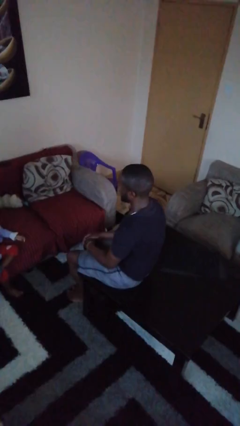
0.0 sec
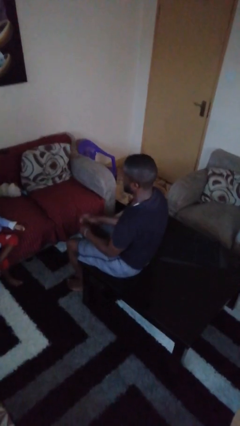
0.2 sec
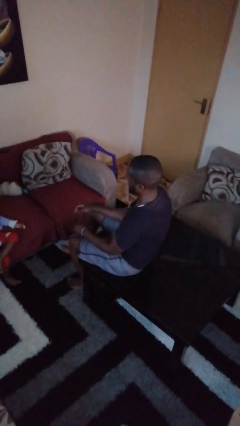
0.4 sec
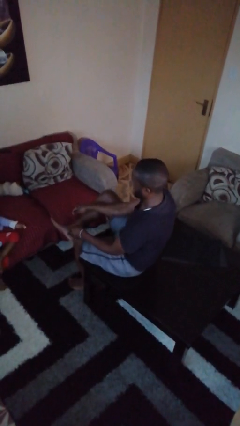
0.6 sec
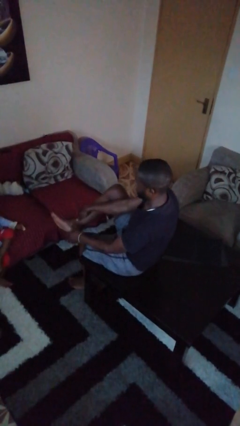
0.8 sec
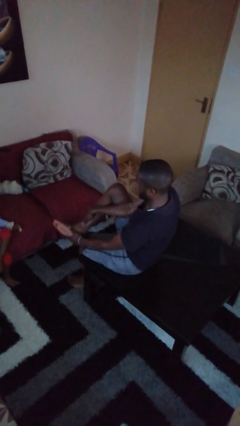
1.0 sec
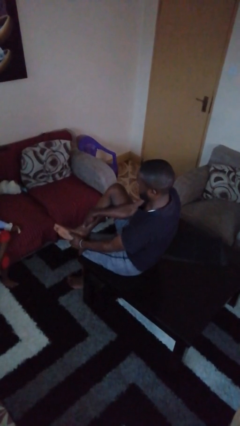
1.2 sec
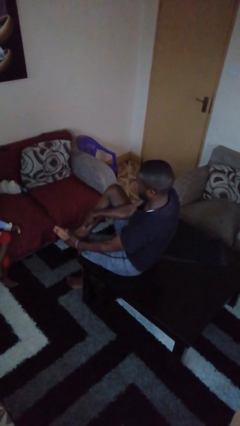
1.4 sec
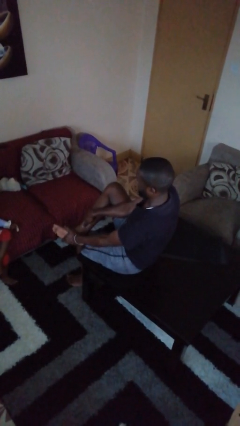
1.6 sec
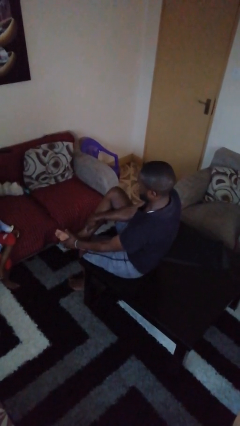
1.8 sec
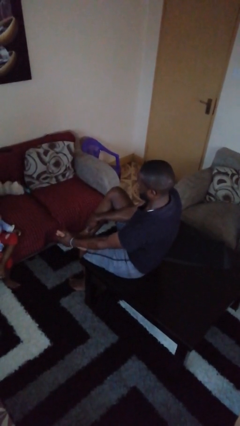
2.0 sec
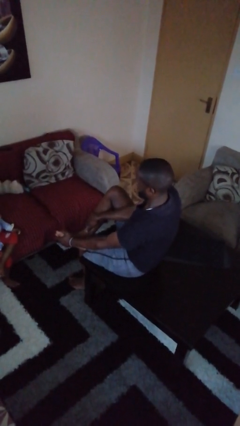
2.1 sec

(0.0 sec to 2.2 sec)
person rubs foot

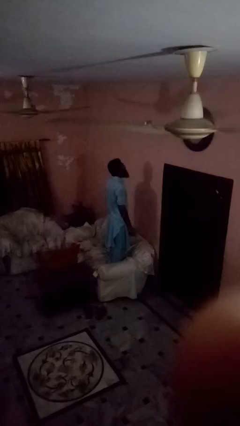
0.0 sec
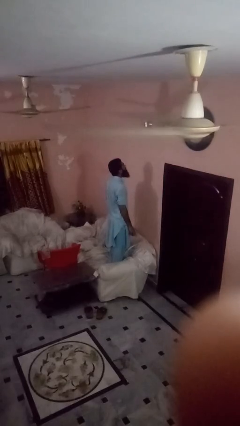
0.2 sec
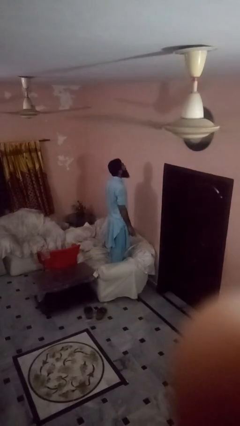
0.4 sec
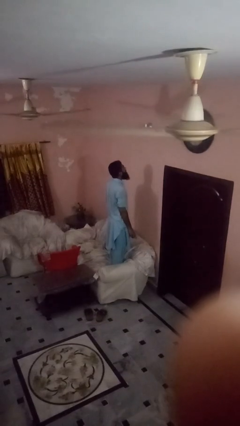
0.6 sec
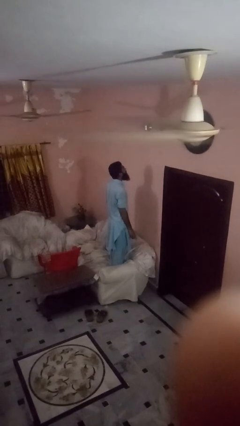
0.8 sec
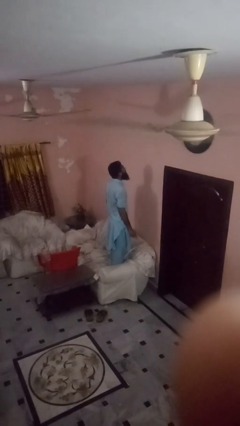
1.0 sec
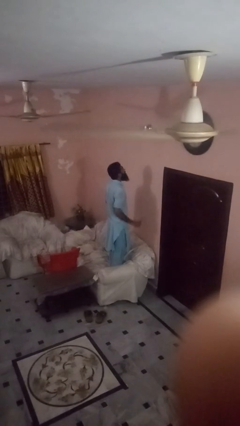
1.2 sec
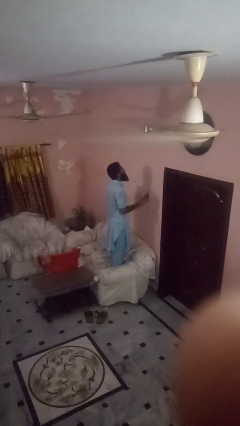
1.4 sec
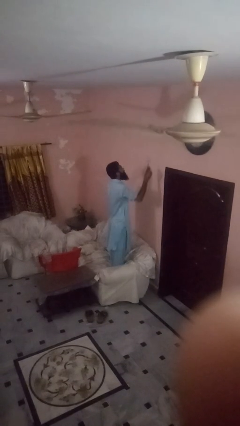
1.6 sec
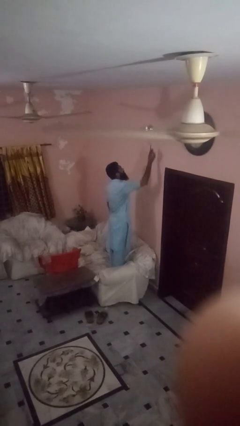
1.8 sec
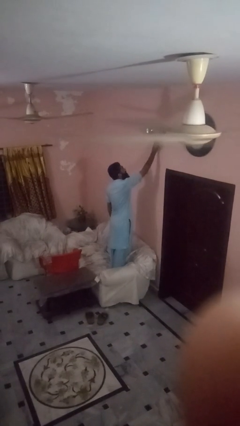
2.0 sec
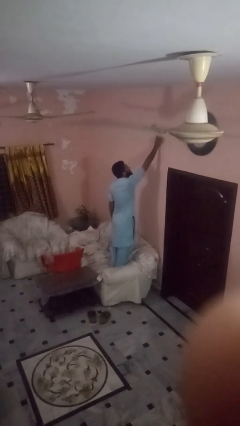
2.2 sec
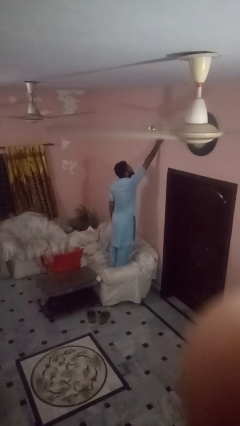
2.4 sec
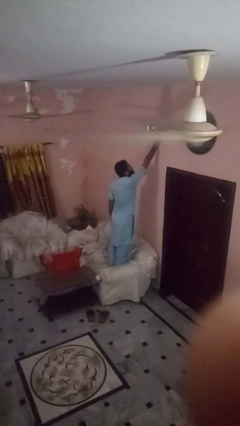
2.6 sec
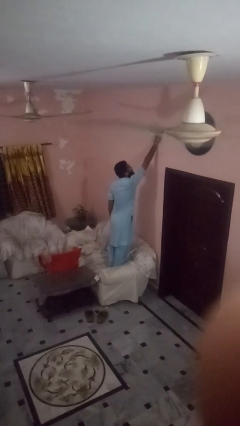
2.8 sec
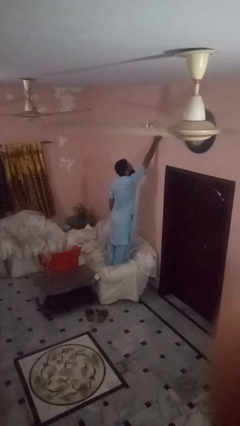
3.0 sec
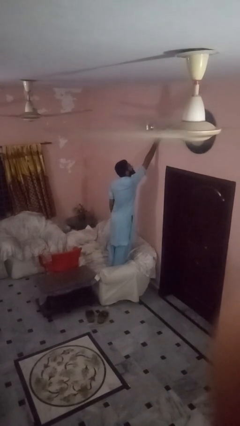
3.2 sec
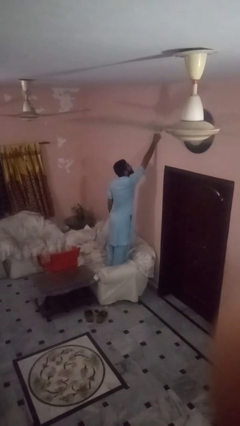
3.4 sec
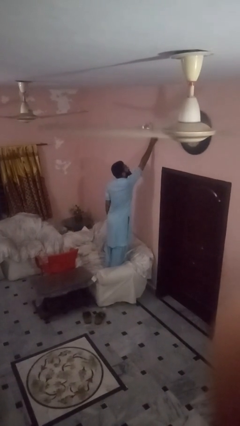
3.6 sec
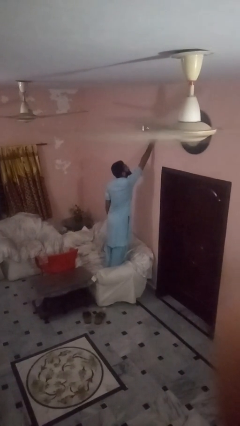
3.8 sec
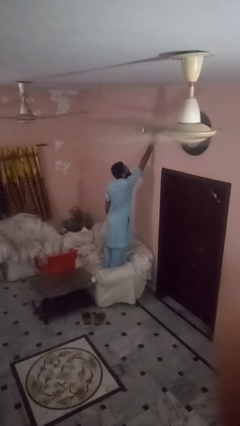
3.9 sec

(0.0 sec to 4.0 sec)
person puts up smoke detector

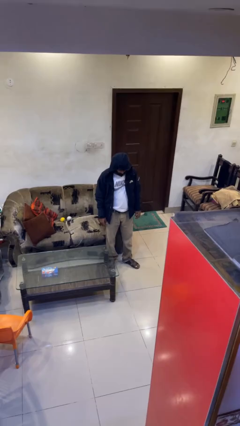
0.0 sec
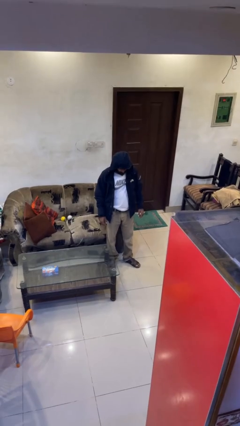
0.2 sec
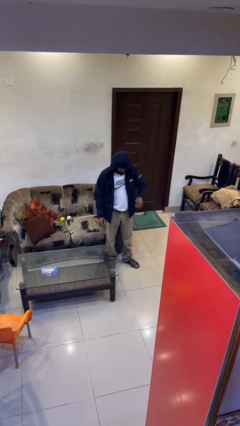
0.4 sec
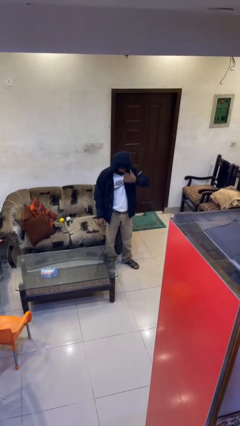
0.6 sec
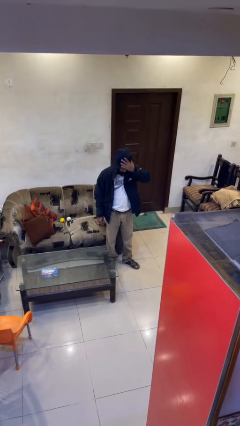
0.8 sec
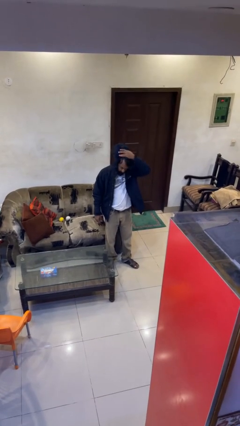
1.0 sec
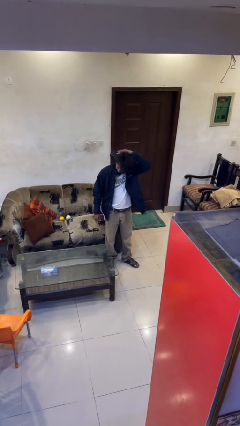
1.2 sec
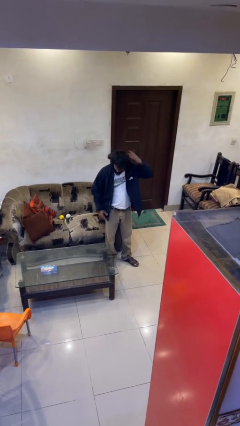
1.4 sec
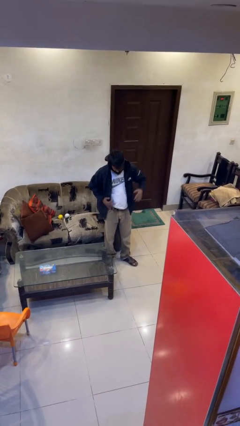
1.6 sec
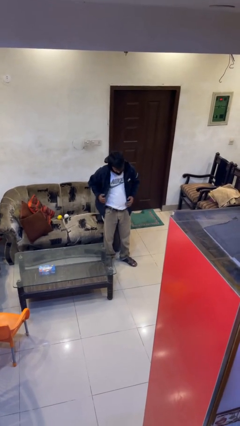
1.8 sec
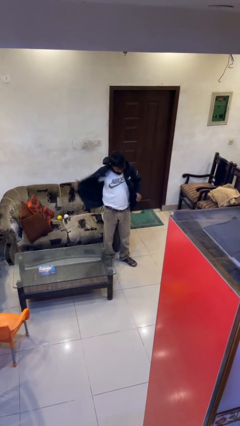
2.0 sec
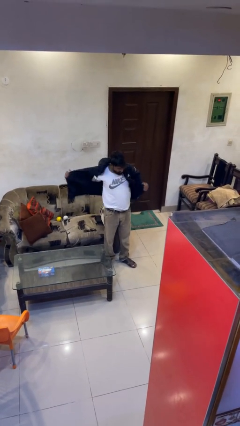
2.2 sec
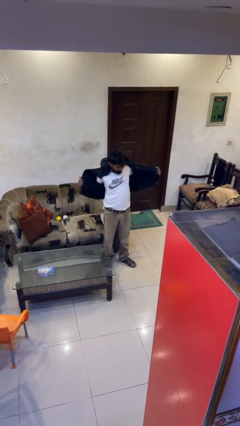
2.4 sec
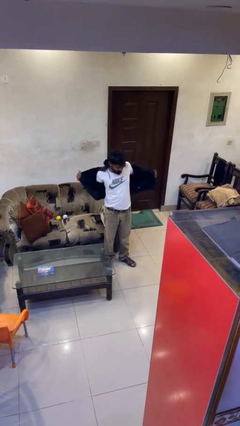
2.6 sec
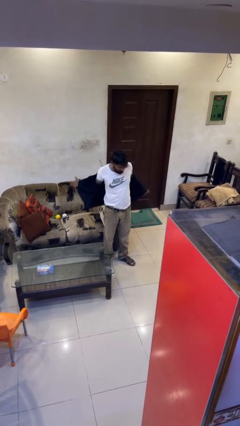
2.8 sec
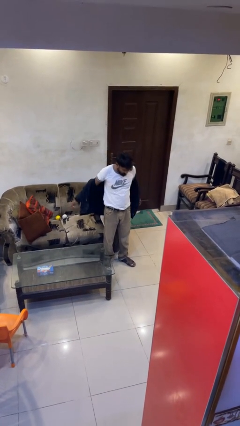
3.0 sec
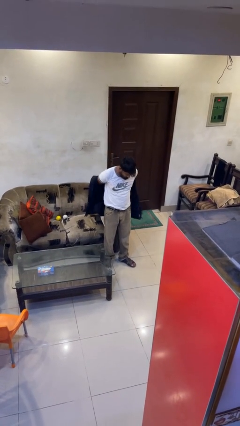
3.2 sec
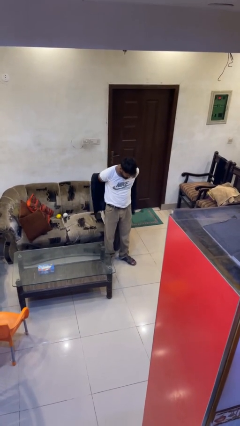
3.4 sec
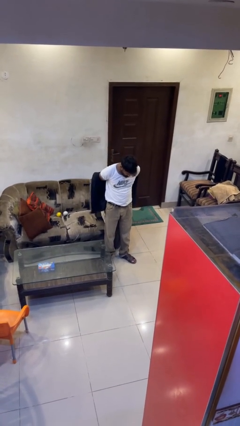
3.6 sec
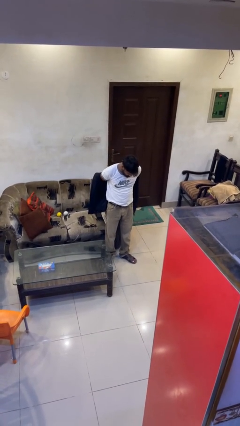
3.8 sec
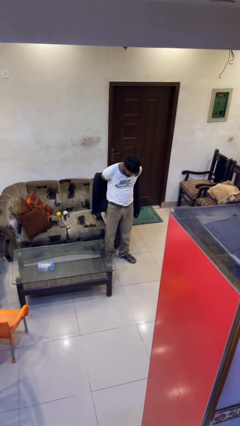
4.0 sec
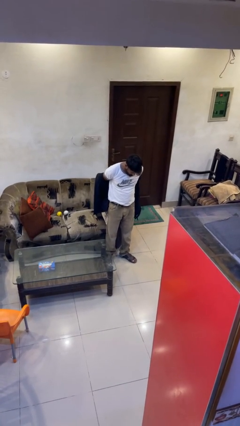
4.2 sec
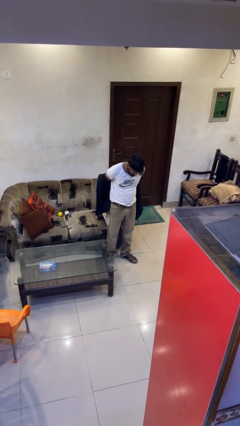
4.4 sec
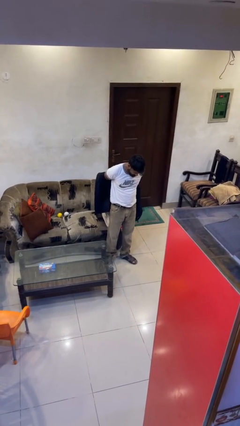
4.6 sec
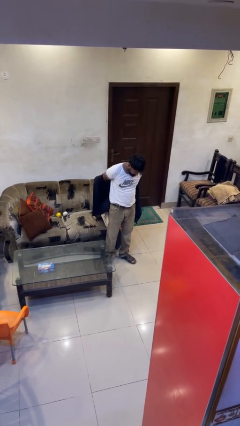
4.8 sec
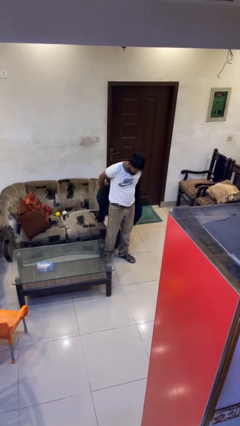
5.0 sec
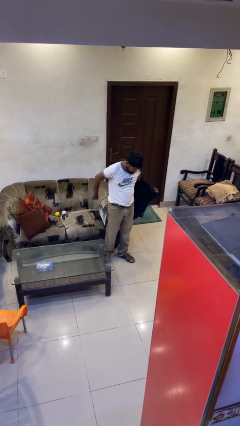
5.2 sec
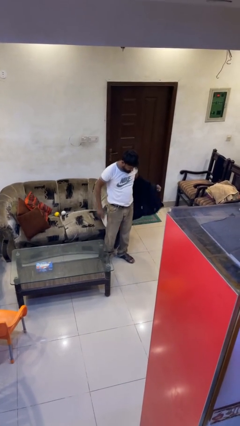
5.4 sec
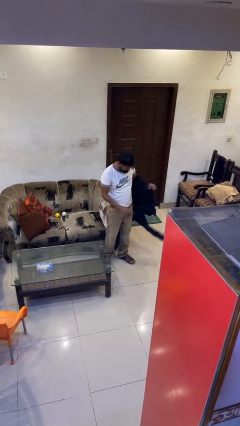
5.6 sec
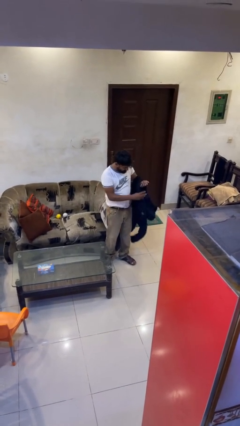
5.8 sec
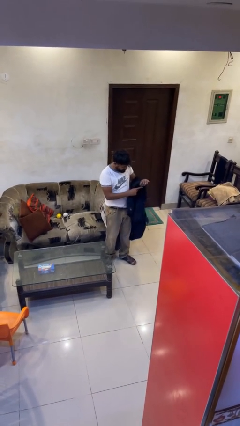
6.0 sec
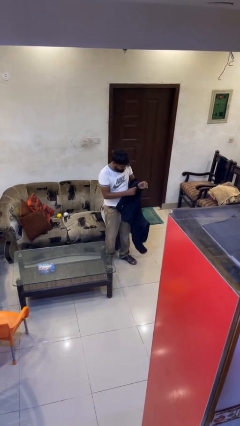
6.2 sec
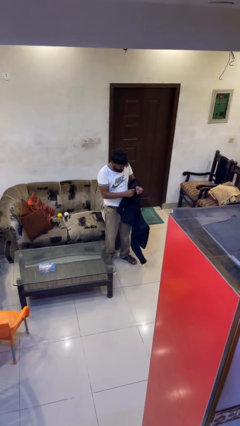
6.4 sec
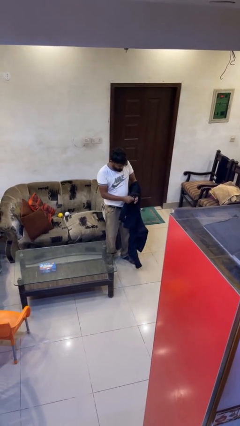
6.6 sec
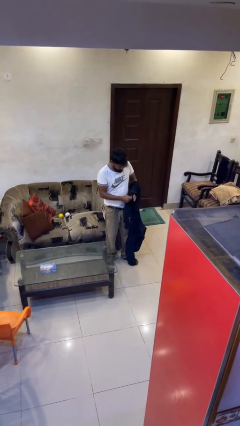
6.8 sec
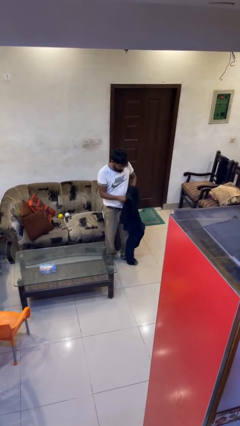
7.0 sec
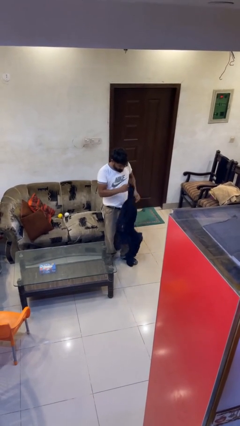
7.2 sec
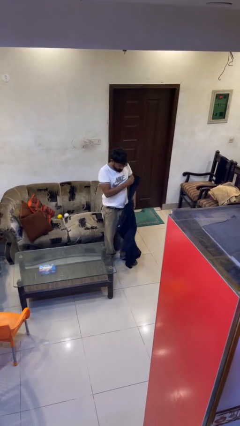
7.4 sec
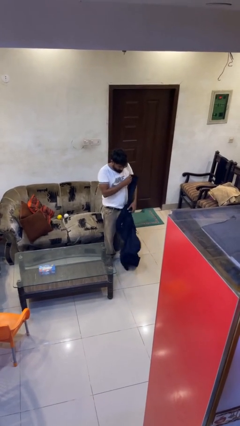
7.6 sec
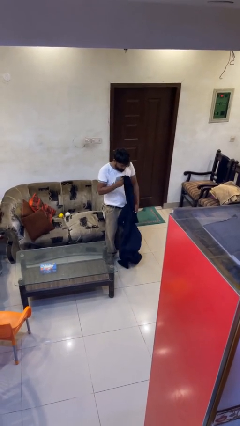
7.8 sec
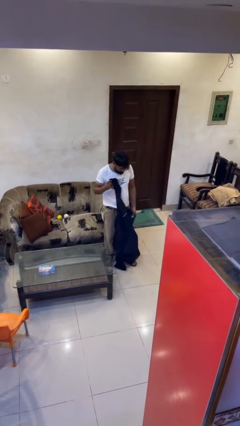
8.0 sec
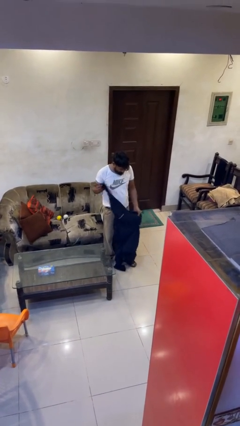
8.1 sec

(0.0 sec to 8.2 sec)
person takes off hoodie

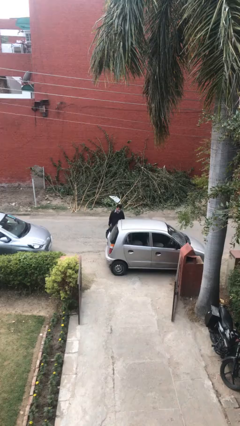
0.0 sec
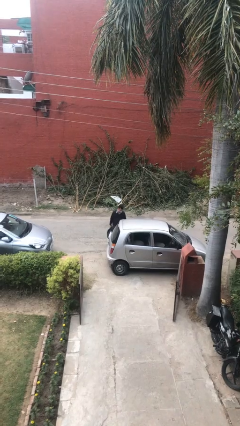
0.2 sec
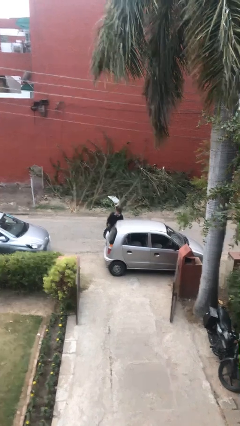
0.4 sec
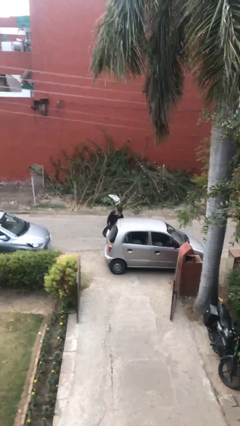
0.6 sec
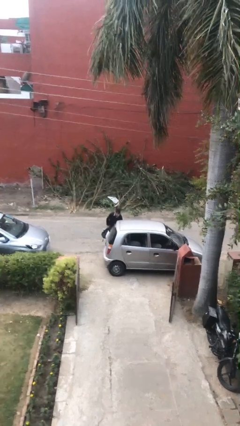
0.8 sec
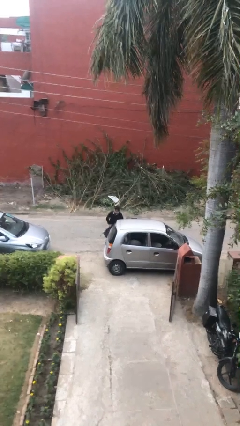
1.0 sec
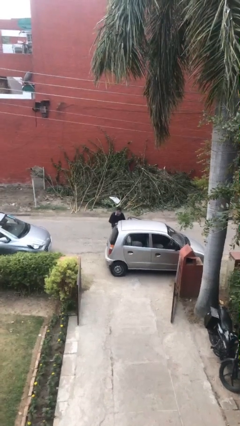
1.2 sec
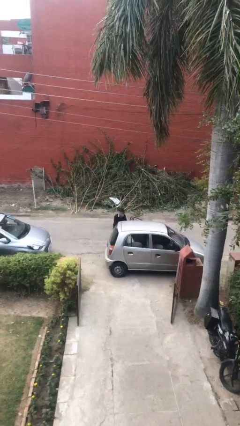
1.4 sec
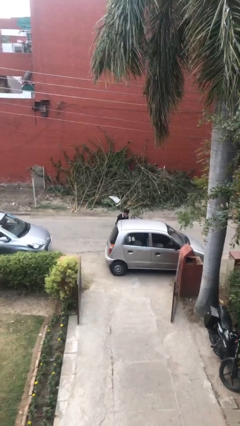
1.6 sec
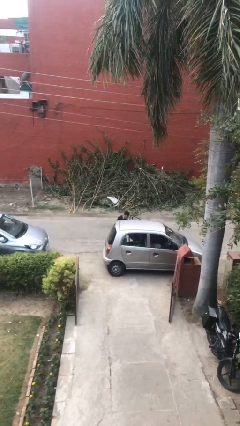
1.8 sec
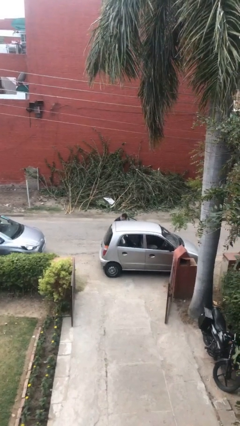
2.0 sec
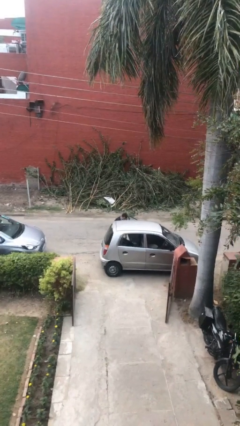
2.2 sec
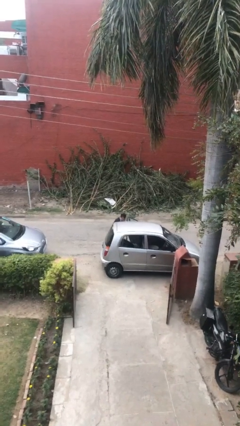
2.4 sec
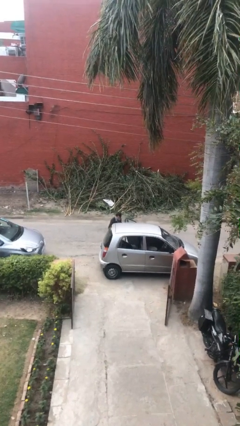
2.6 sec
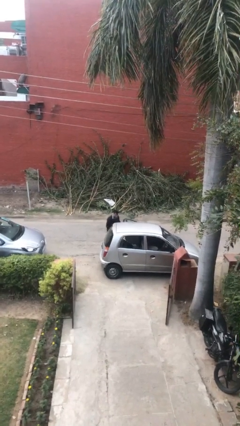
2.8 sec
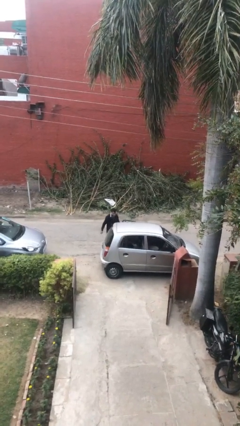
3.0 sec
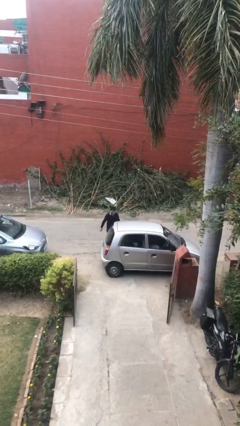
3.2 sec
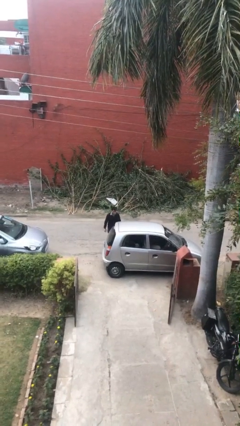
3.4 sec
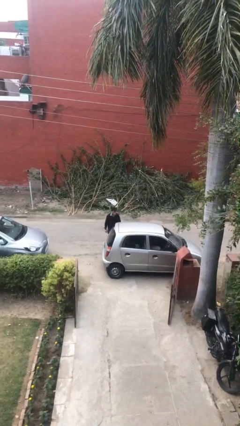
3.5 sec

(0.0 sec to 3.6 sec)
person loads car

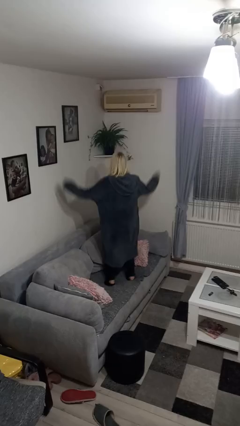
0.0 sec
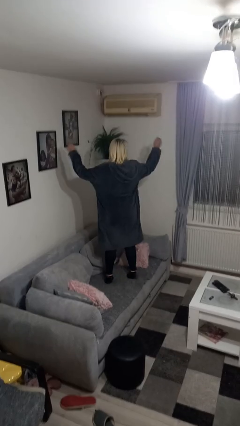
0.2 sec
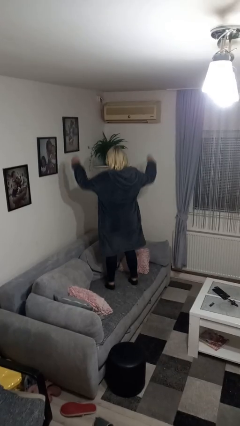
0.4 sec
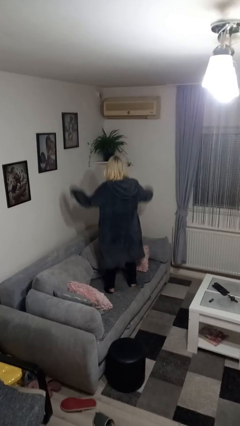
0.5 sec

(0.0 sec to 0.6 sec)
person jumps on couch
